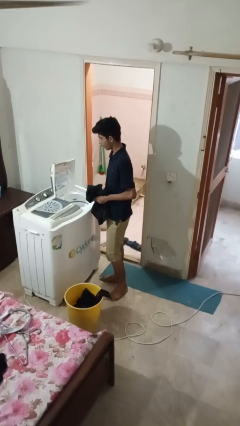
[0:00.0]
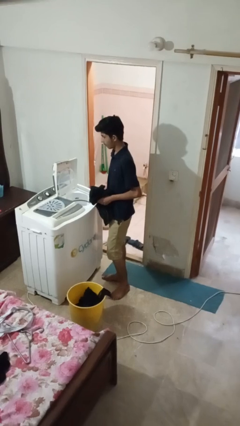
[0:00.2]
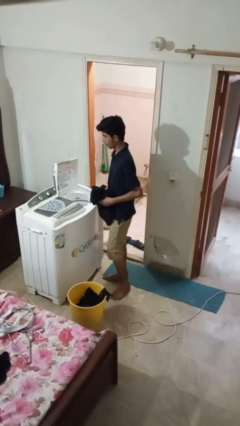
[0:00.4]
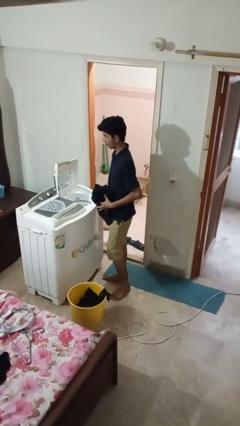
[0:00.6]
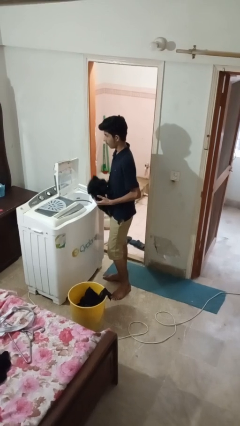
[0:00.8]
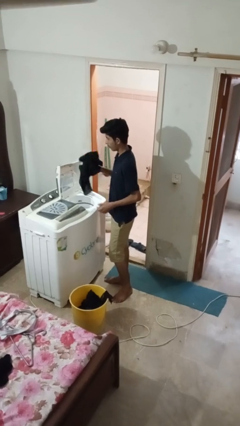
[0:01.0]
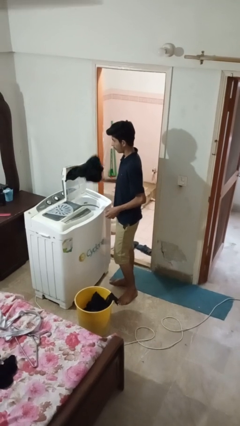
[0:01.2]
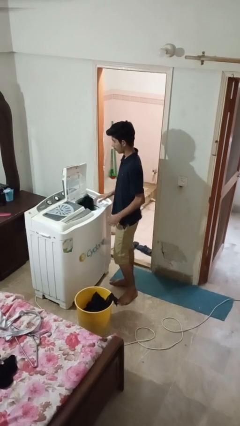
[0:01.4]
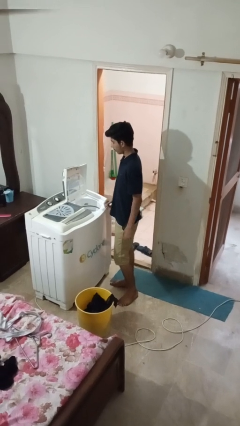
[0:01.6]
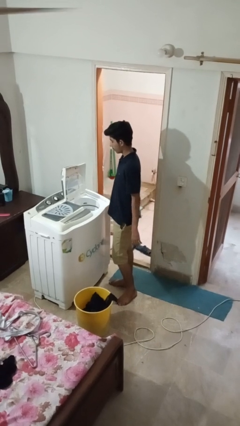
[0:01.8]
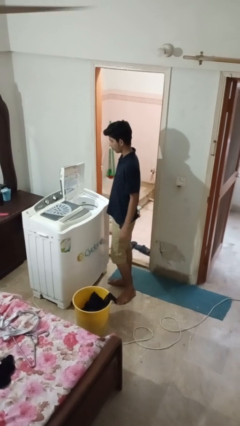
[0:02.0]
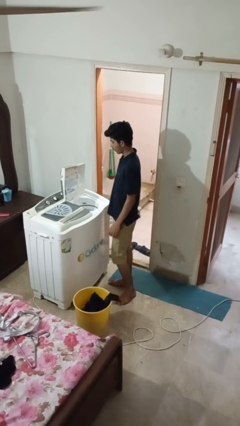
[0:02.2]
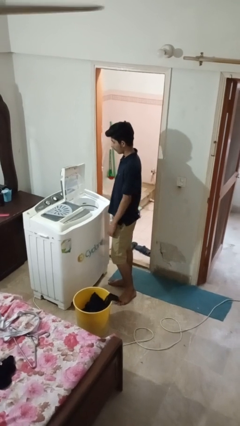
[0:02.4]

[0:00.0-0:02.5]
person loads dryer

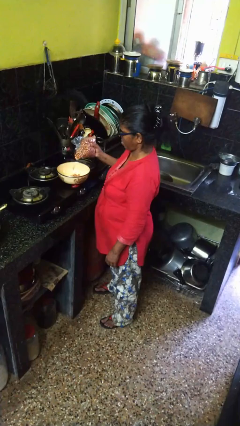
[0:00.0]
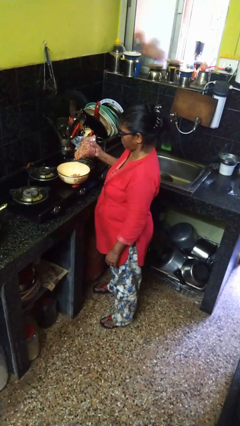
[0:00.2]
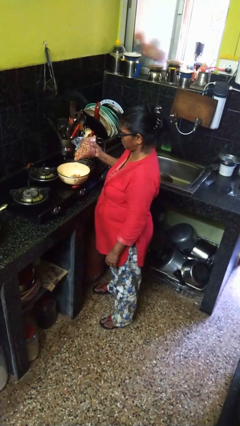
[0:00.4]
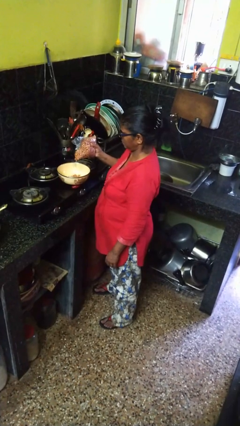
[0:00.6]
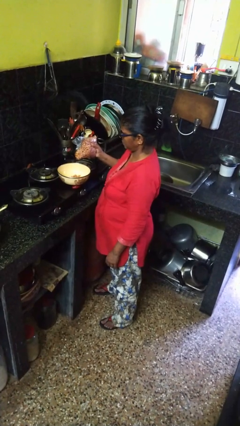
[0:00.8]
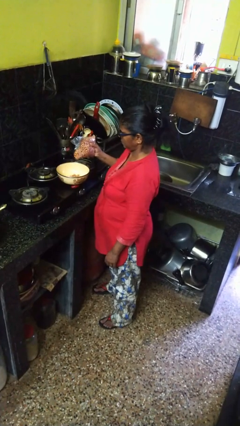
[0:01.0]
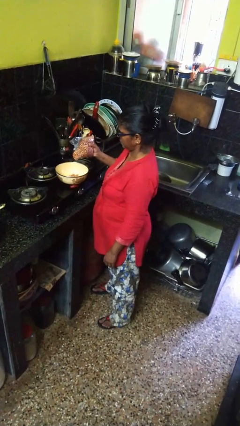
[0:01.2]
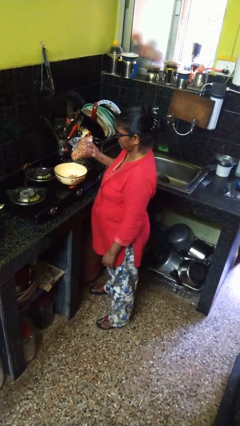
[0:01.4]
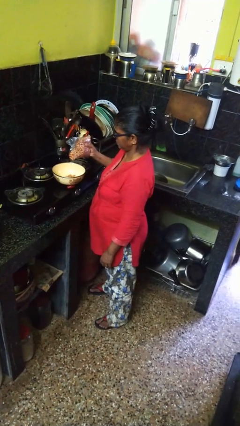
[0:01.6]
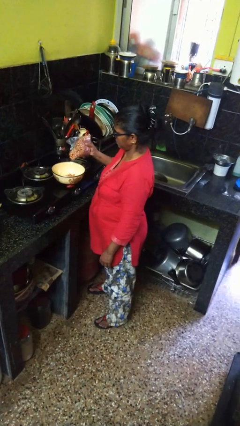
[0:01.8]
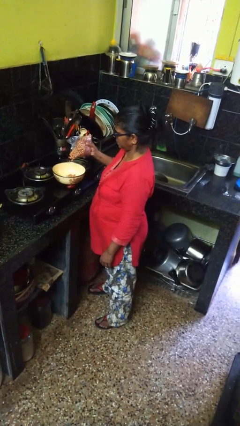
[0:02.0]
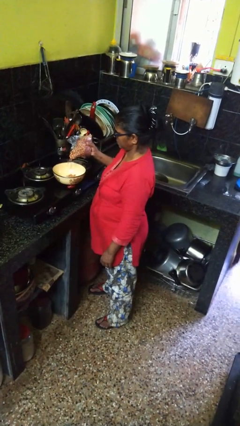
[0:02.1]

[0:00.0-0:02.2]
person pours into bowl

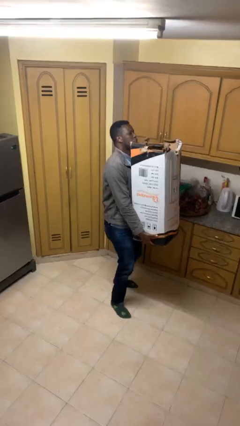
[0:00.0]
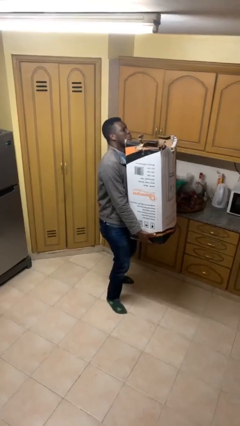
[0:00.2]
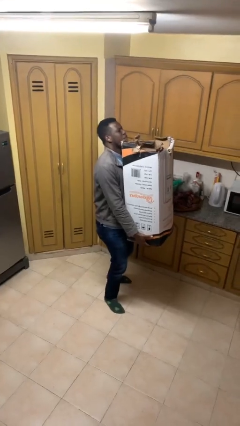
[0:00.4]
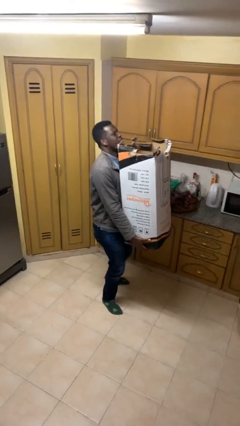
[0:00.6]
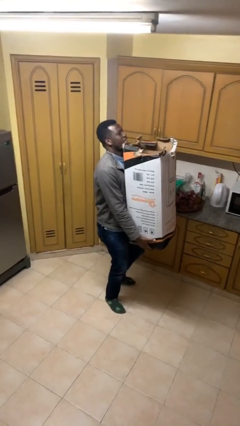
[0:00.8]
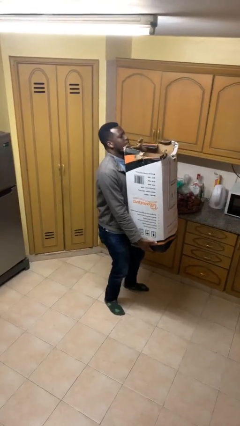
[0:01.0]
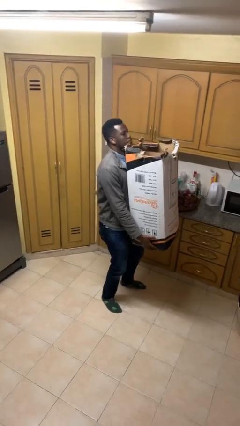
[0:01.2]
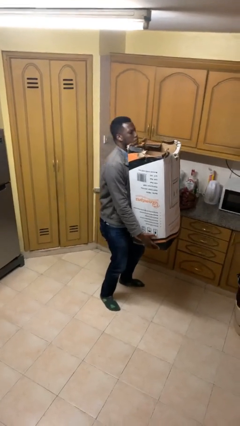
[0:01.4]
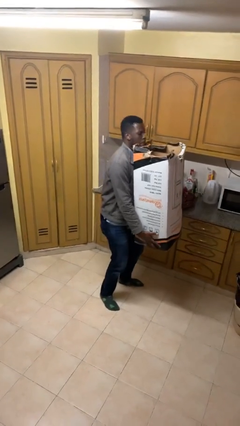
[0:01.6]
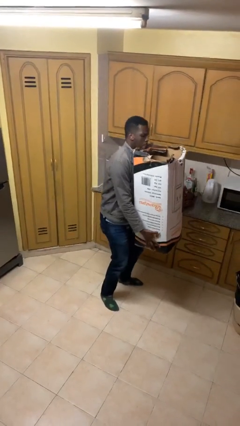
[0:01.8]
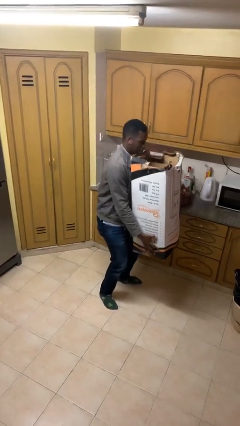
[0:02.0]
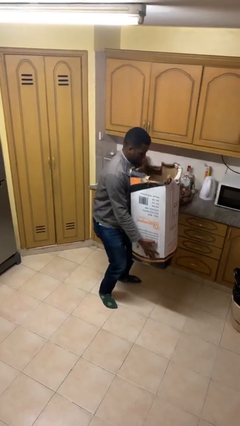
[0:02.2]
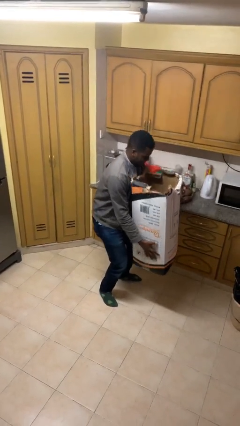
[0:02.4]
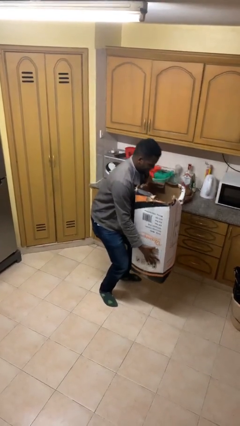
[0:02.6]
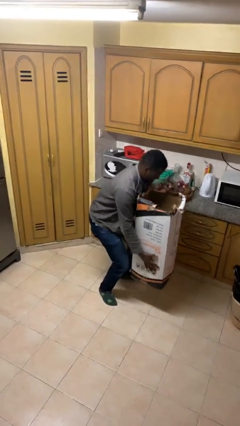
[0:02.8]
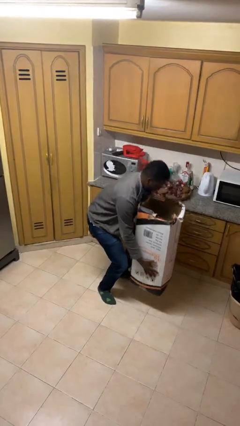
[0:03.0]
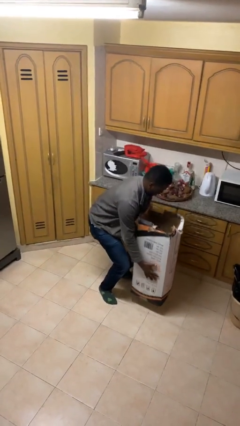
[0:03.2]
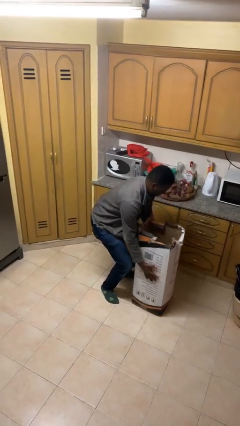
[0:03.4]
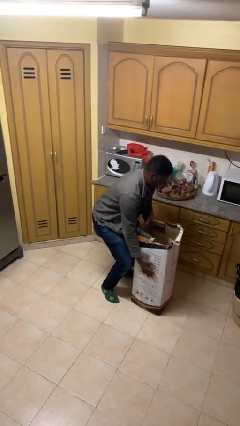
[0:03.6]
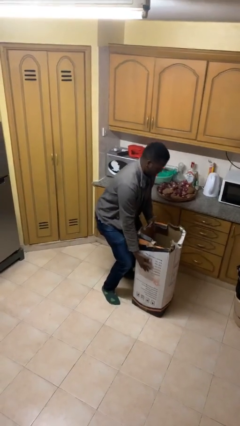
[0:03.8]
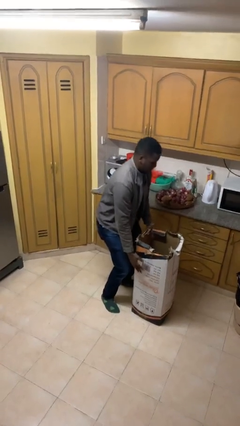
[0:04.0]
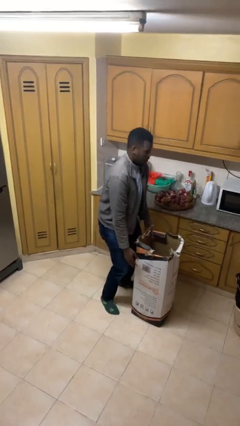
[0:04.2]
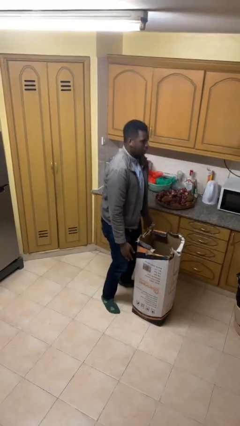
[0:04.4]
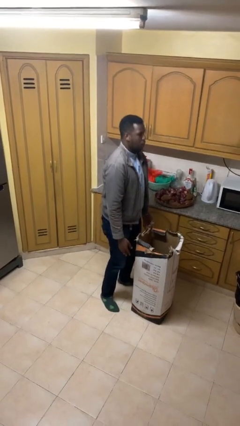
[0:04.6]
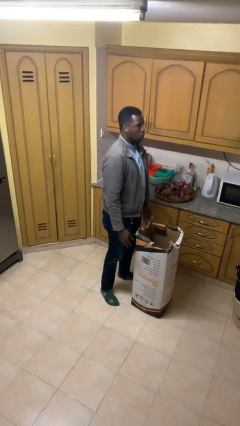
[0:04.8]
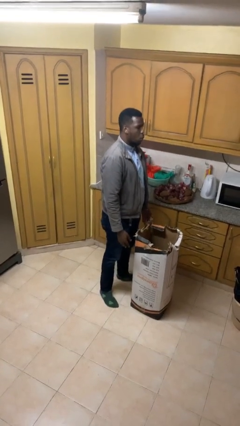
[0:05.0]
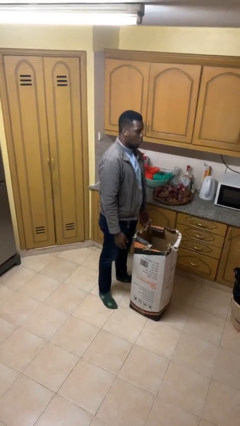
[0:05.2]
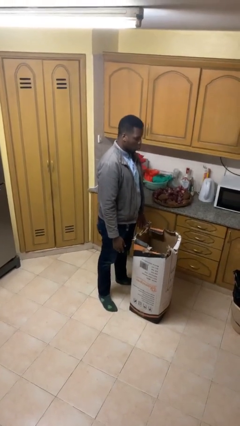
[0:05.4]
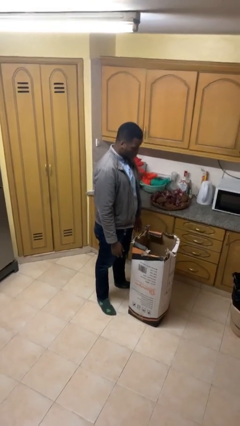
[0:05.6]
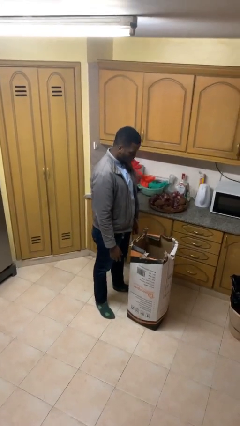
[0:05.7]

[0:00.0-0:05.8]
person puts down object on floor

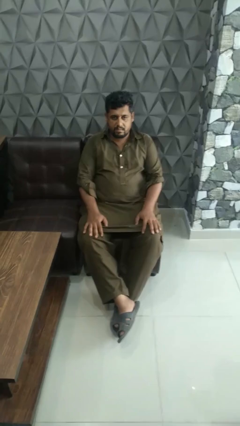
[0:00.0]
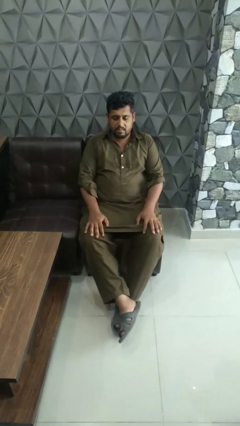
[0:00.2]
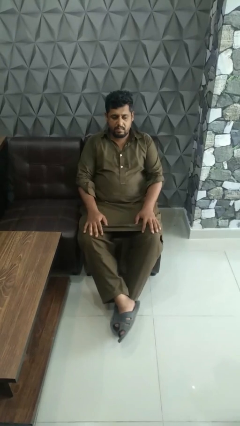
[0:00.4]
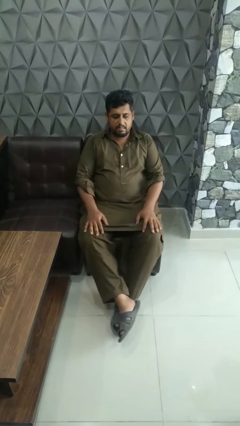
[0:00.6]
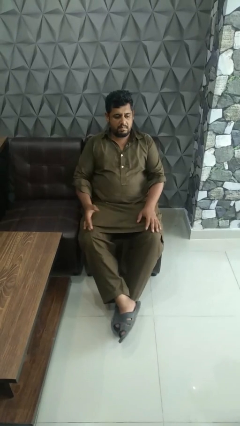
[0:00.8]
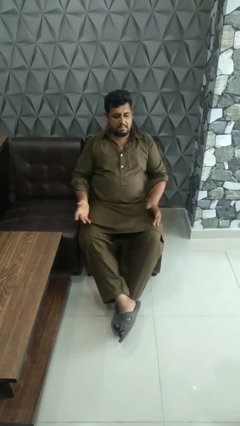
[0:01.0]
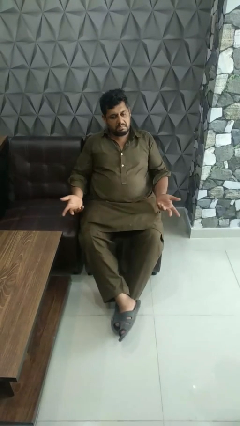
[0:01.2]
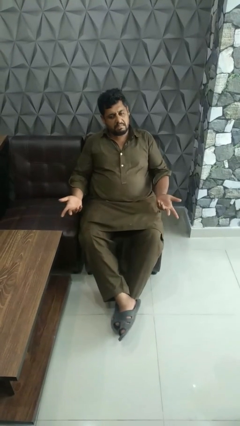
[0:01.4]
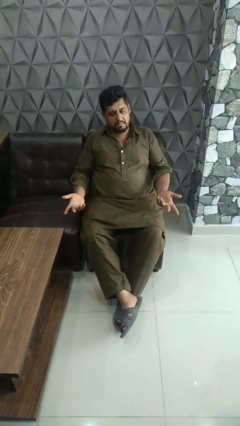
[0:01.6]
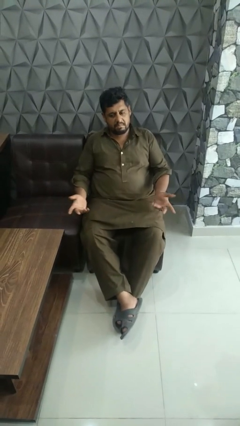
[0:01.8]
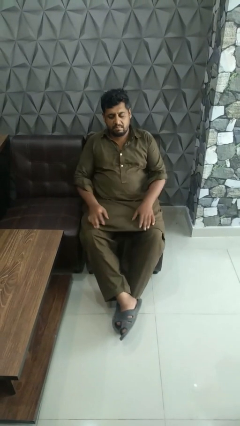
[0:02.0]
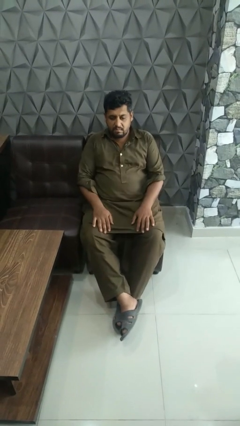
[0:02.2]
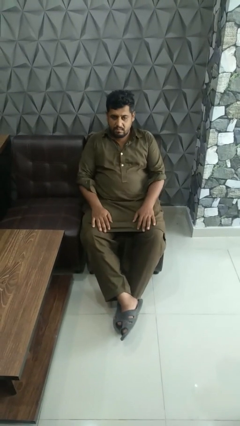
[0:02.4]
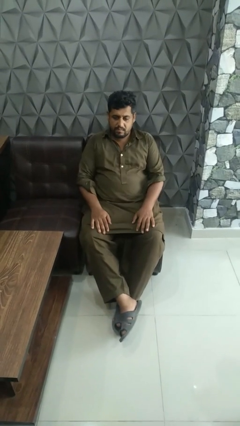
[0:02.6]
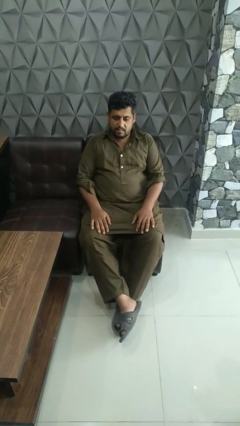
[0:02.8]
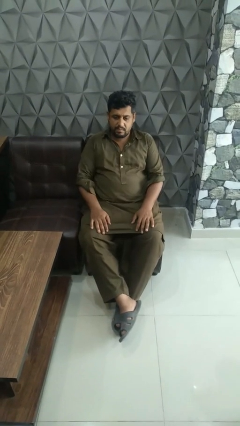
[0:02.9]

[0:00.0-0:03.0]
person shrugs

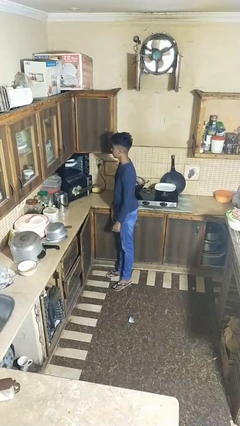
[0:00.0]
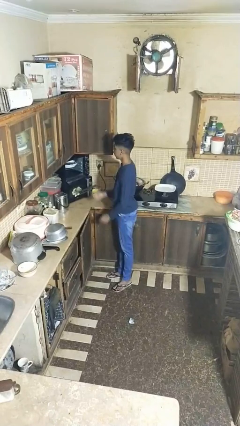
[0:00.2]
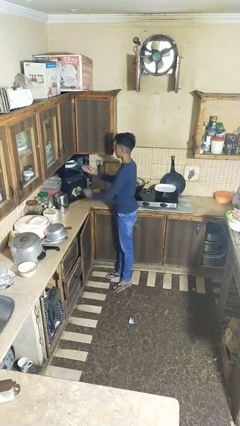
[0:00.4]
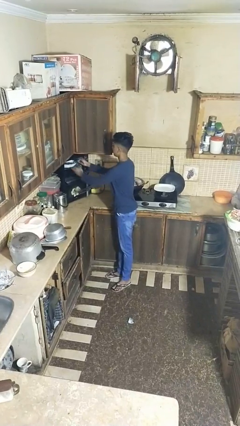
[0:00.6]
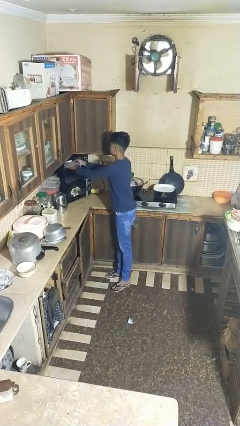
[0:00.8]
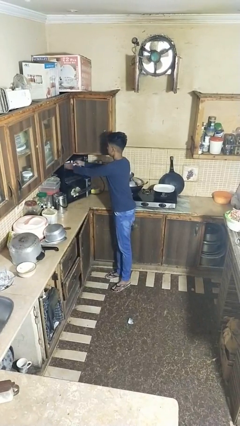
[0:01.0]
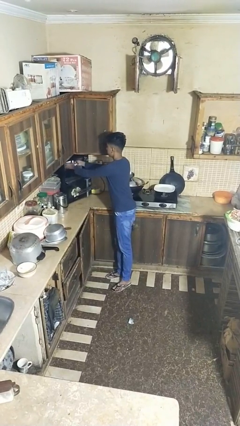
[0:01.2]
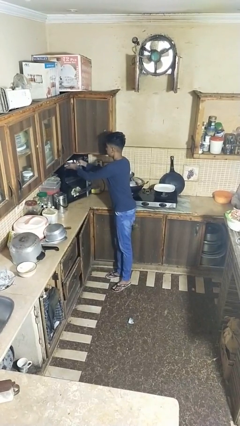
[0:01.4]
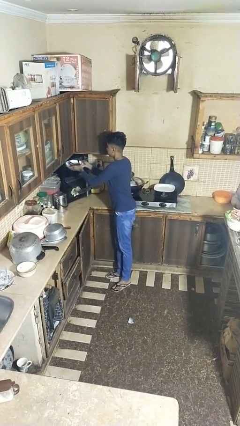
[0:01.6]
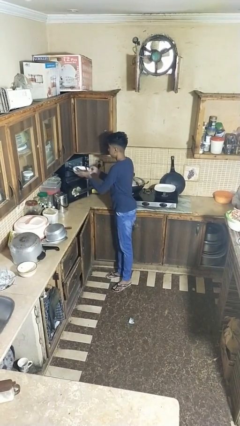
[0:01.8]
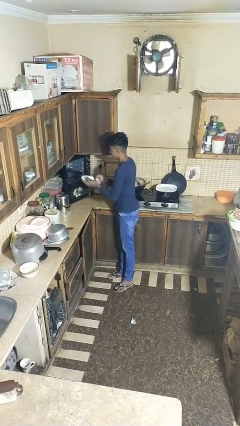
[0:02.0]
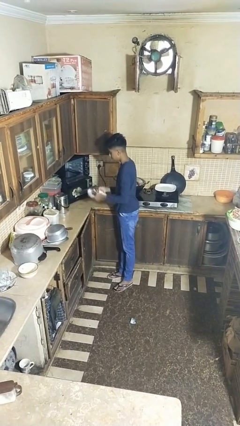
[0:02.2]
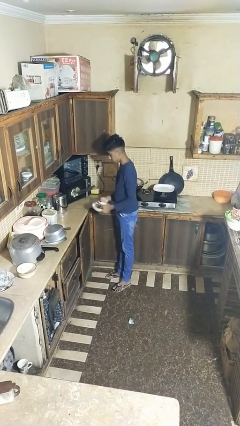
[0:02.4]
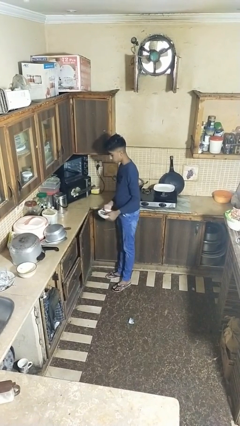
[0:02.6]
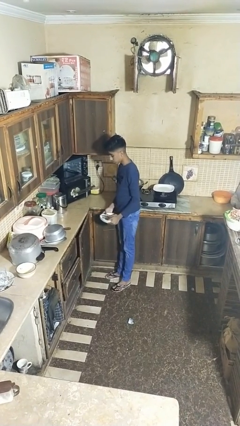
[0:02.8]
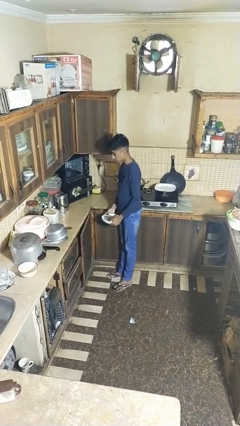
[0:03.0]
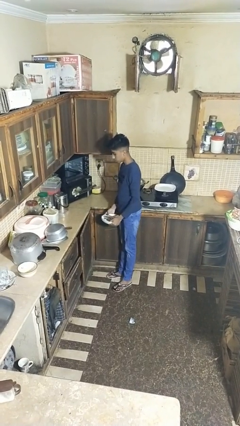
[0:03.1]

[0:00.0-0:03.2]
person unloads dishwasher

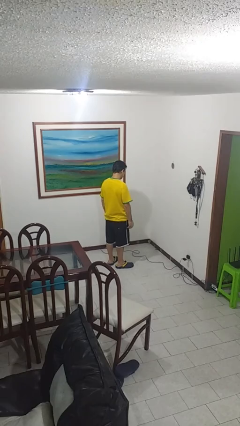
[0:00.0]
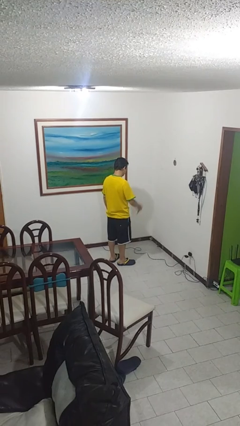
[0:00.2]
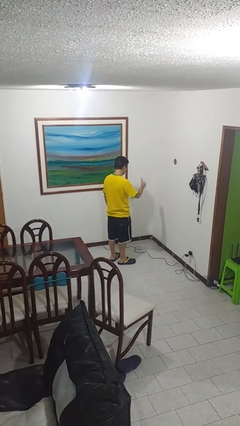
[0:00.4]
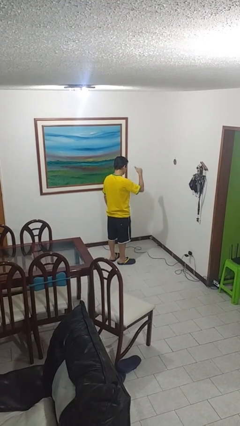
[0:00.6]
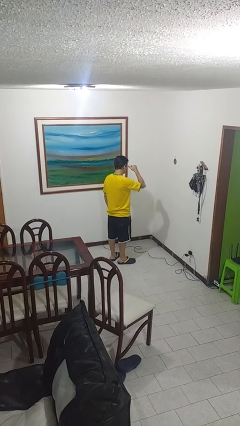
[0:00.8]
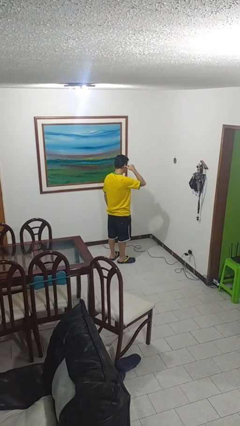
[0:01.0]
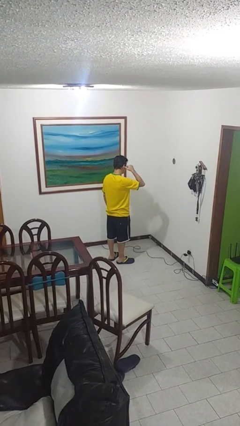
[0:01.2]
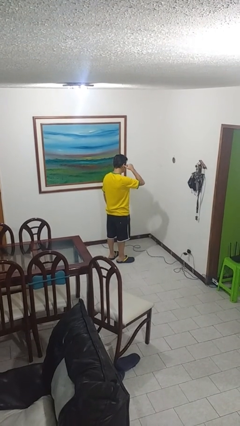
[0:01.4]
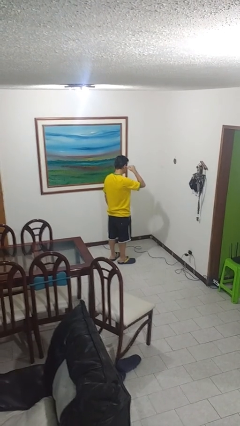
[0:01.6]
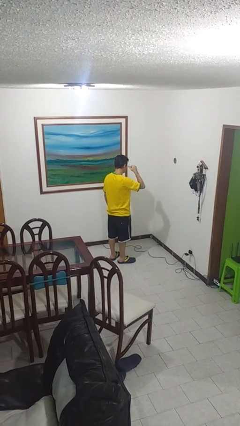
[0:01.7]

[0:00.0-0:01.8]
person gestures call me
